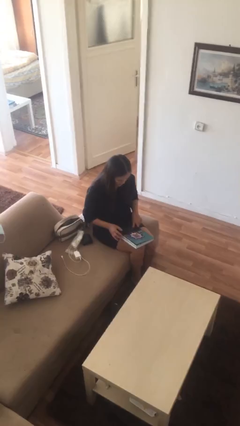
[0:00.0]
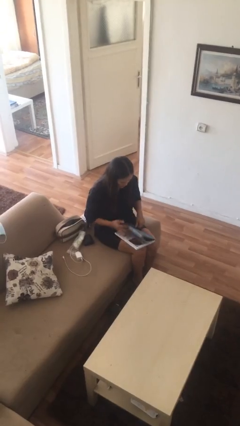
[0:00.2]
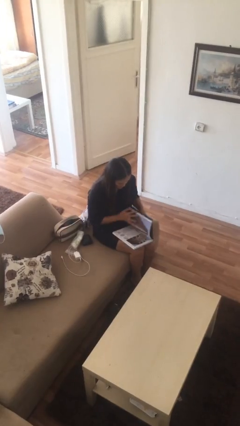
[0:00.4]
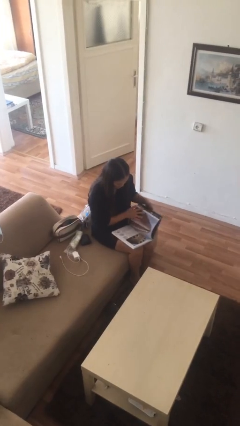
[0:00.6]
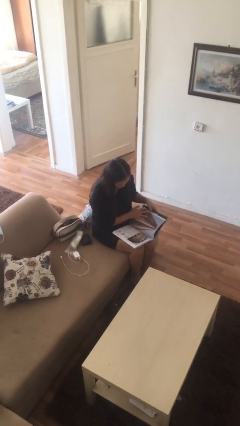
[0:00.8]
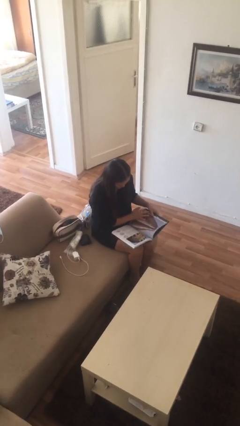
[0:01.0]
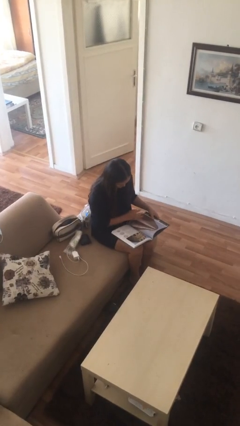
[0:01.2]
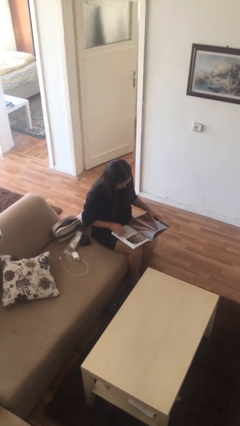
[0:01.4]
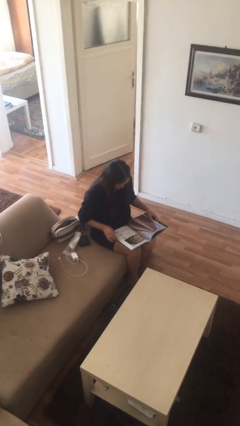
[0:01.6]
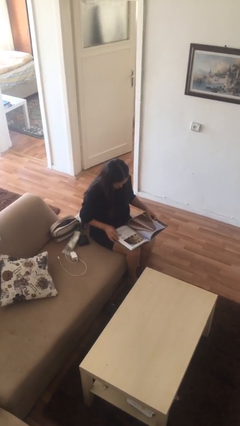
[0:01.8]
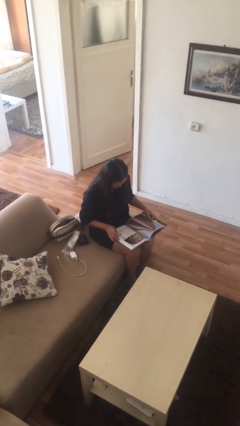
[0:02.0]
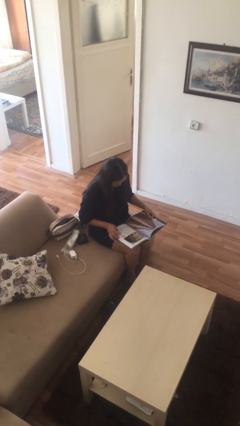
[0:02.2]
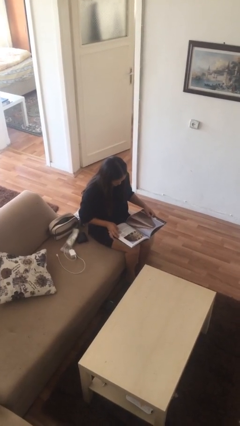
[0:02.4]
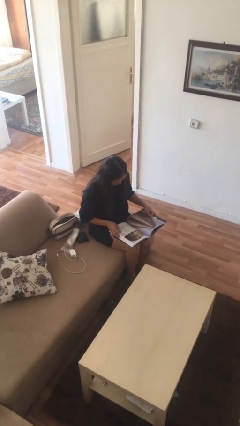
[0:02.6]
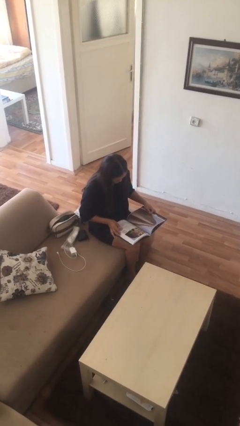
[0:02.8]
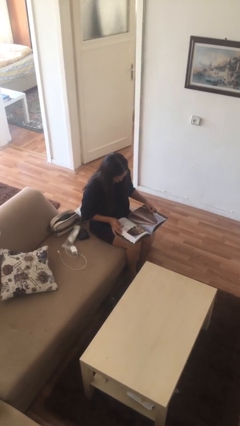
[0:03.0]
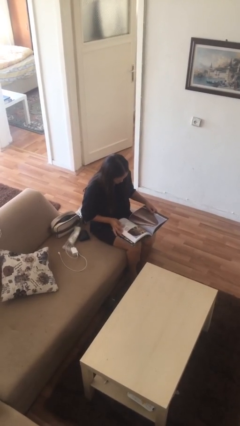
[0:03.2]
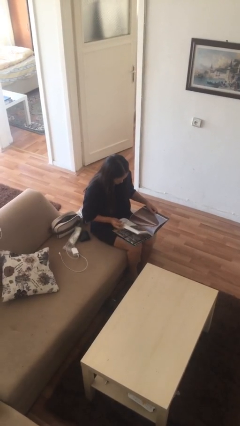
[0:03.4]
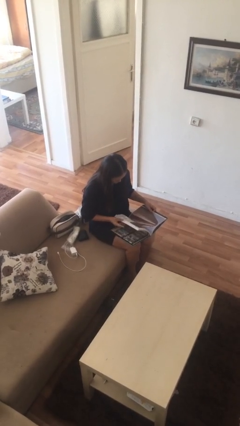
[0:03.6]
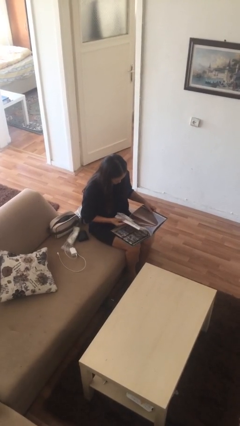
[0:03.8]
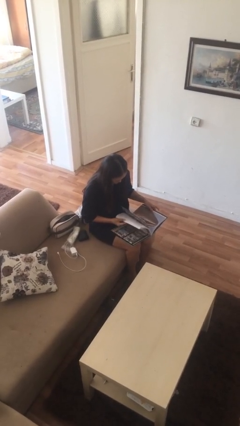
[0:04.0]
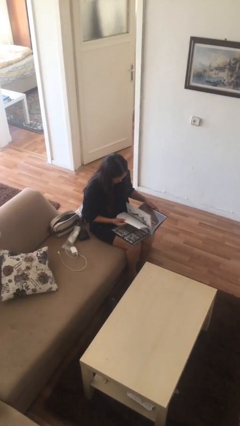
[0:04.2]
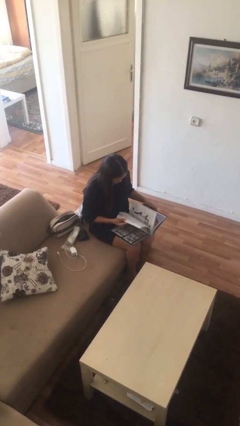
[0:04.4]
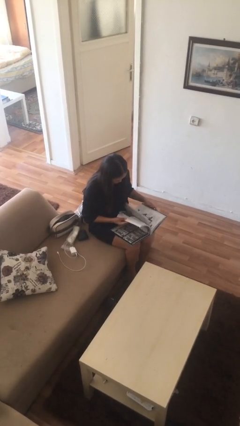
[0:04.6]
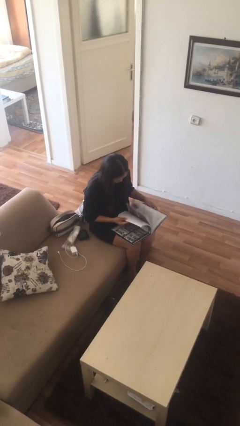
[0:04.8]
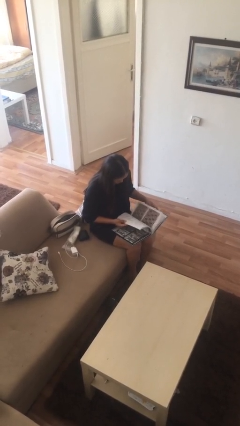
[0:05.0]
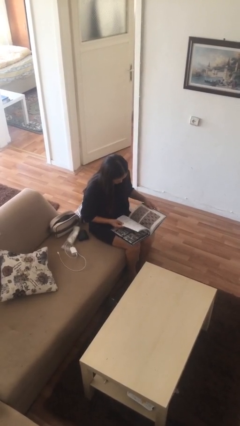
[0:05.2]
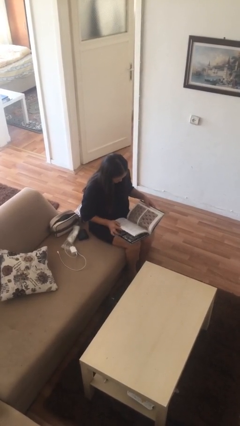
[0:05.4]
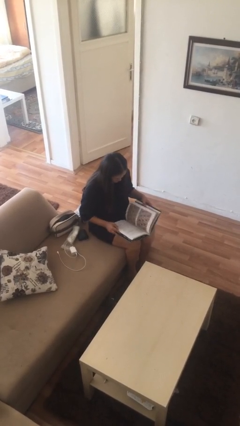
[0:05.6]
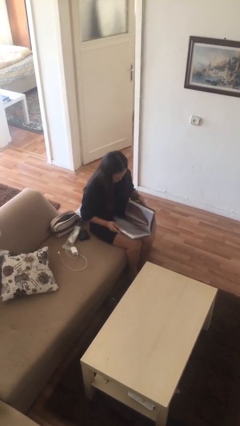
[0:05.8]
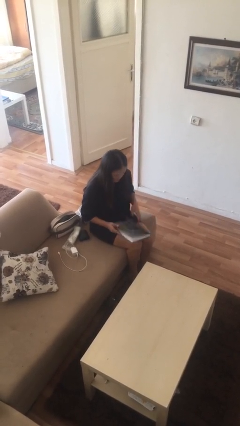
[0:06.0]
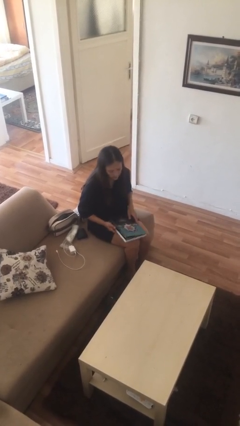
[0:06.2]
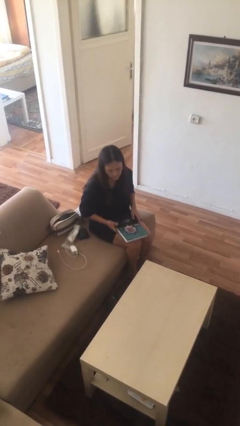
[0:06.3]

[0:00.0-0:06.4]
person reads document

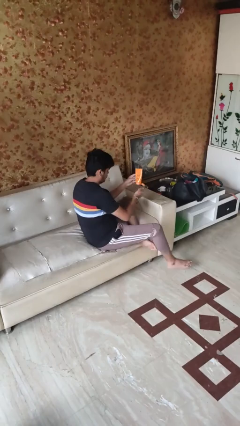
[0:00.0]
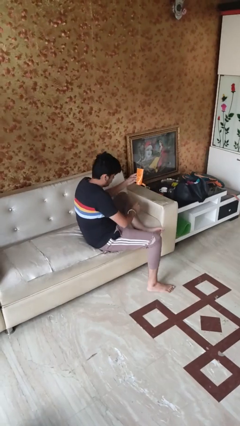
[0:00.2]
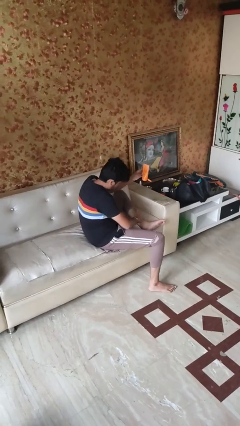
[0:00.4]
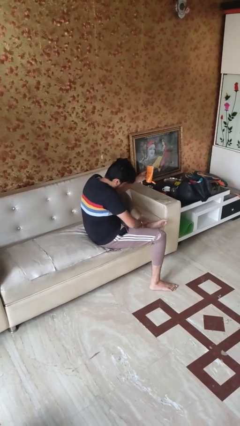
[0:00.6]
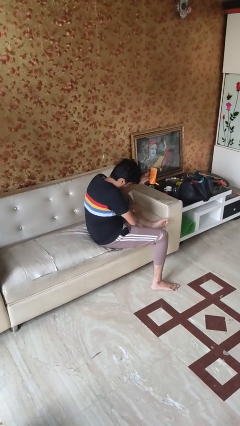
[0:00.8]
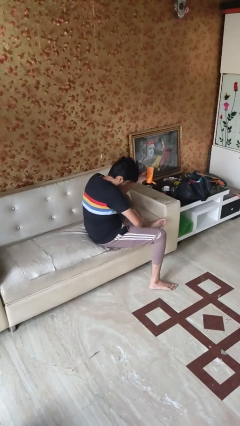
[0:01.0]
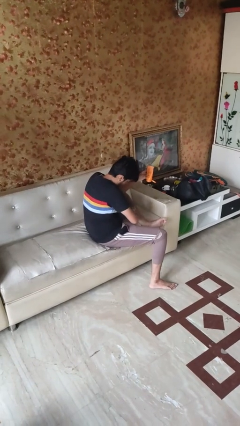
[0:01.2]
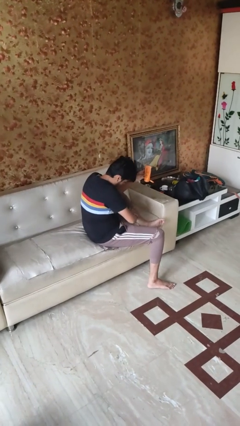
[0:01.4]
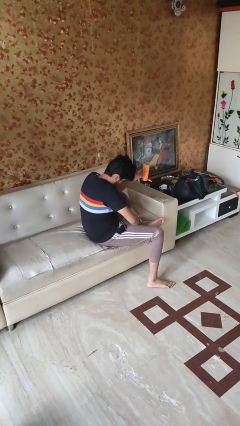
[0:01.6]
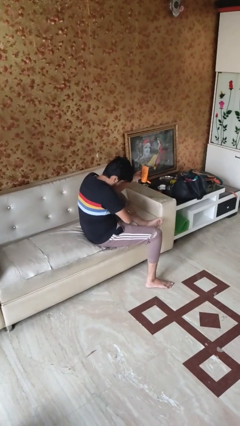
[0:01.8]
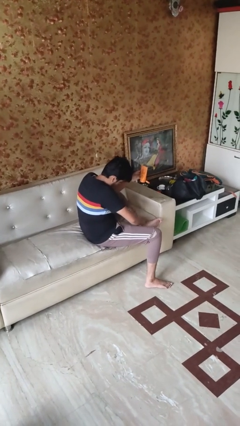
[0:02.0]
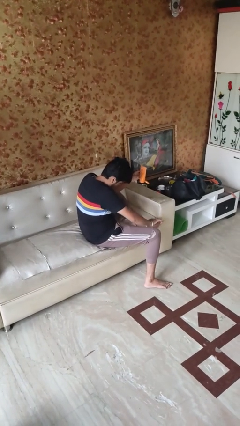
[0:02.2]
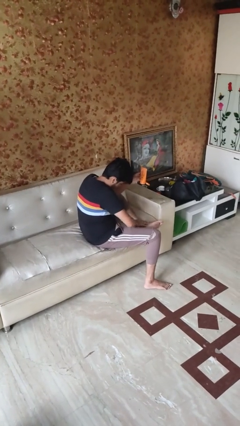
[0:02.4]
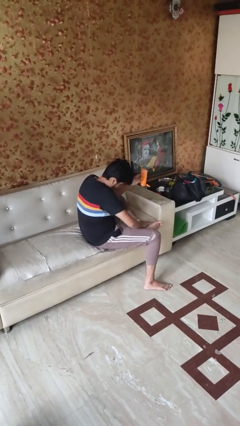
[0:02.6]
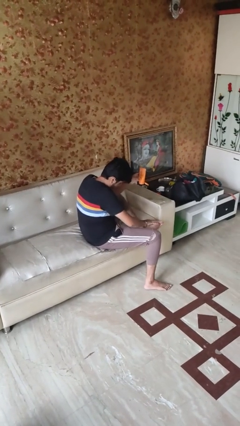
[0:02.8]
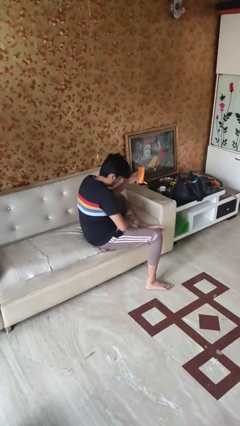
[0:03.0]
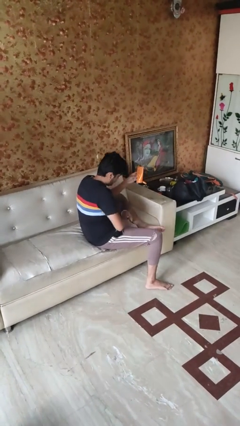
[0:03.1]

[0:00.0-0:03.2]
person applies sunscreen

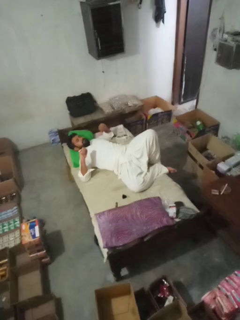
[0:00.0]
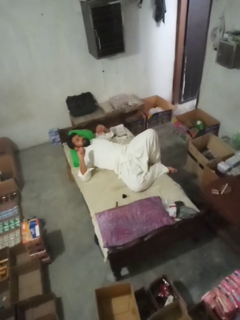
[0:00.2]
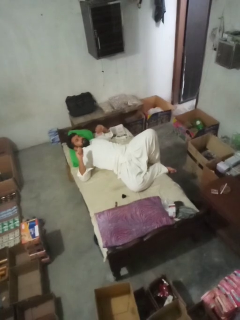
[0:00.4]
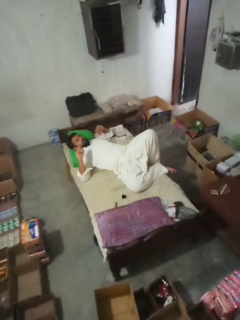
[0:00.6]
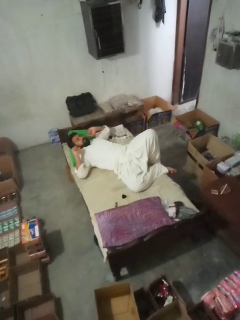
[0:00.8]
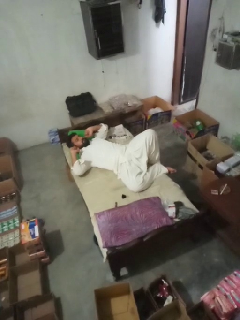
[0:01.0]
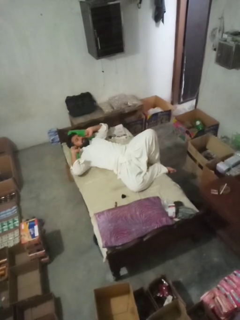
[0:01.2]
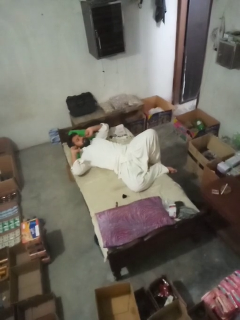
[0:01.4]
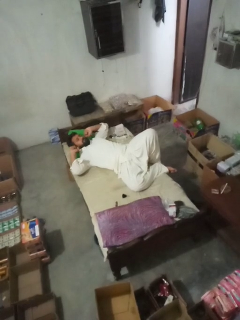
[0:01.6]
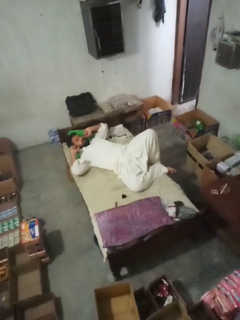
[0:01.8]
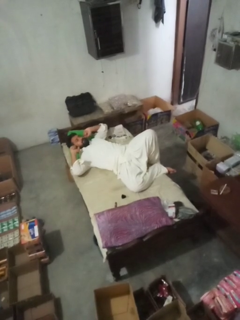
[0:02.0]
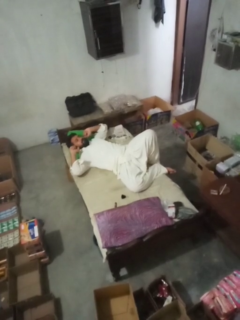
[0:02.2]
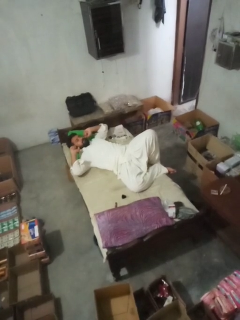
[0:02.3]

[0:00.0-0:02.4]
person puts fingers in ear

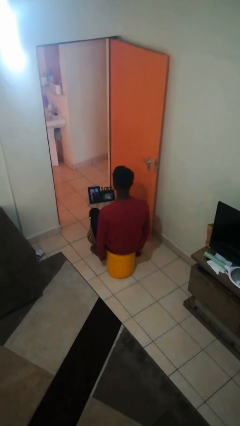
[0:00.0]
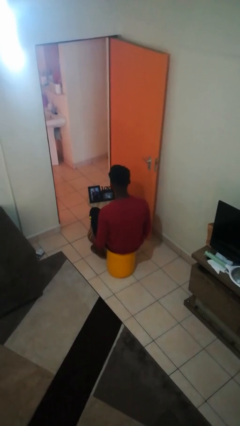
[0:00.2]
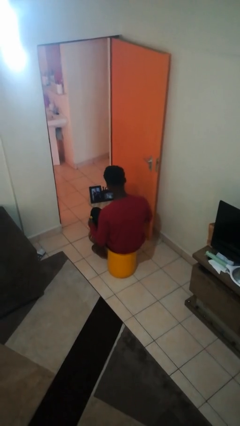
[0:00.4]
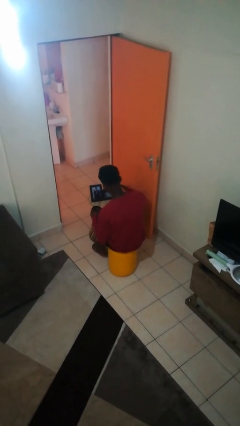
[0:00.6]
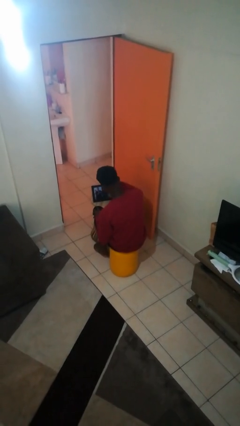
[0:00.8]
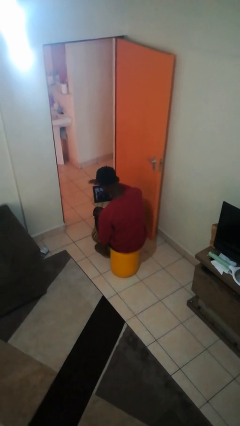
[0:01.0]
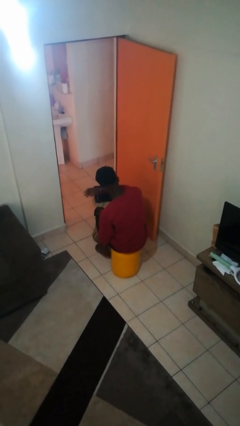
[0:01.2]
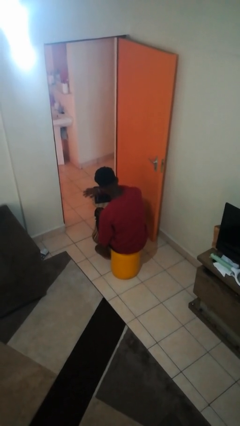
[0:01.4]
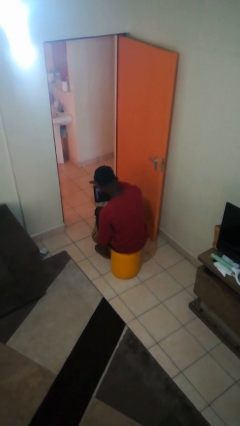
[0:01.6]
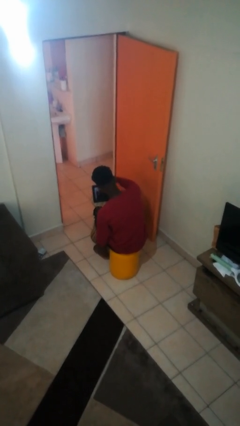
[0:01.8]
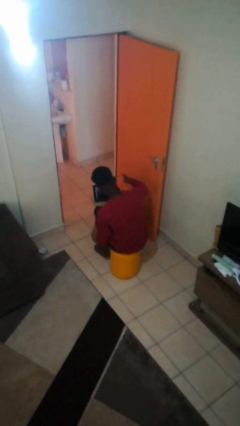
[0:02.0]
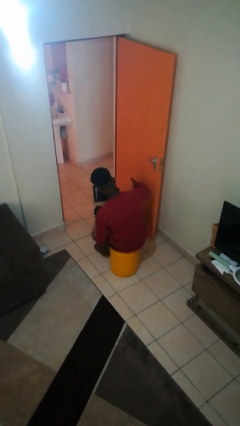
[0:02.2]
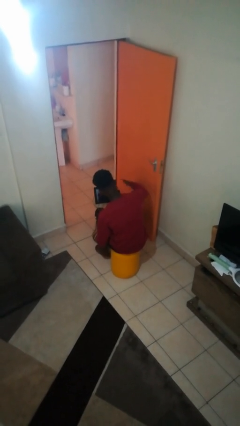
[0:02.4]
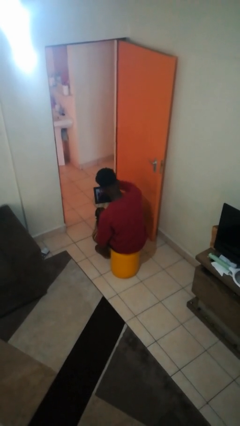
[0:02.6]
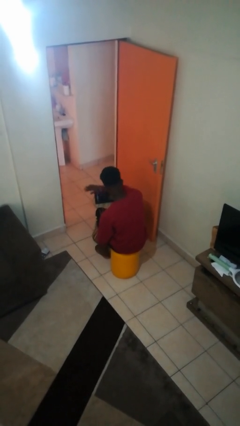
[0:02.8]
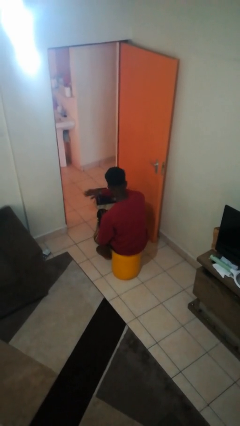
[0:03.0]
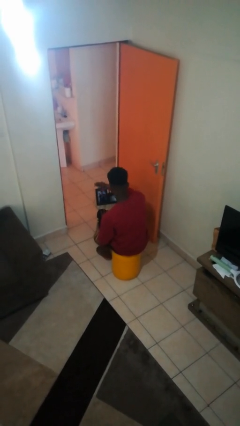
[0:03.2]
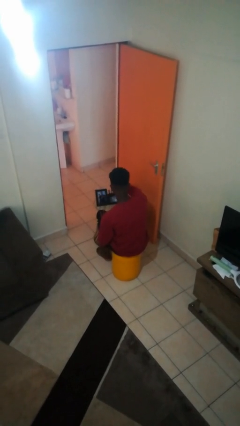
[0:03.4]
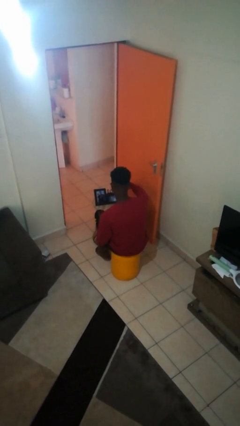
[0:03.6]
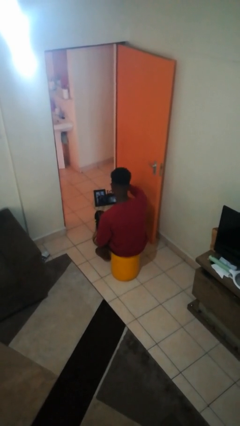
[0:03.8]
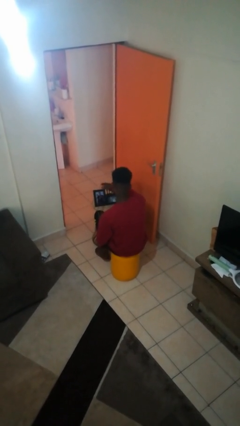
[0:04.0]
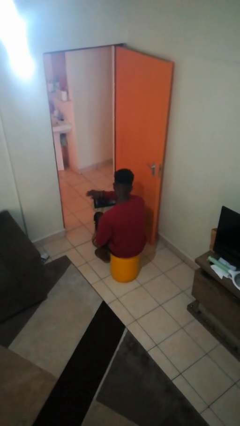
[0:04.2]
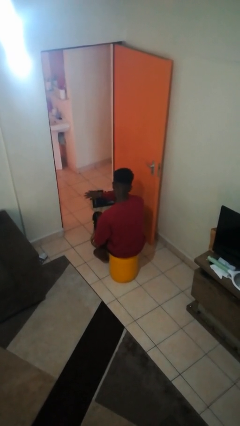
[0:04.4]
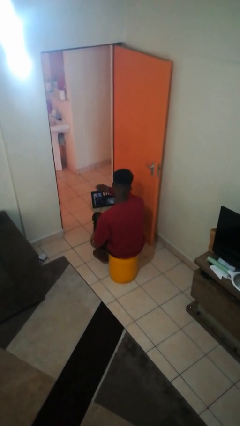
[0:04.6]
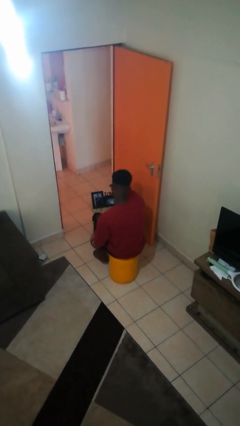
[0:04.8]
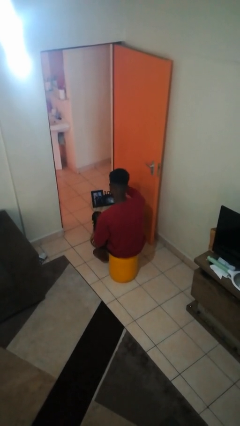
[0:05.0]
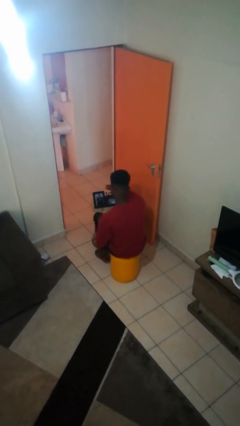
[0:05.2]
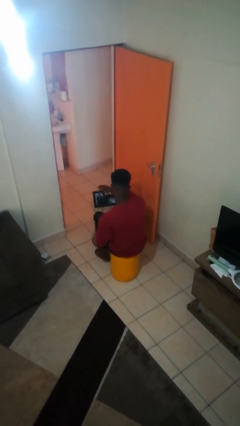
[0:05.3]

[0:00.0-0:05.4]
person waves hand over object

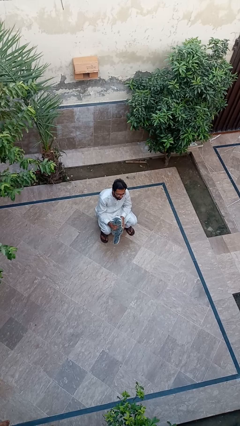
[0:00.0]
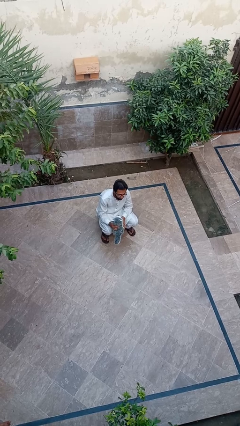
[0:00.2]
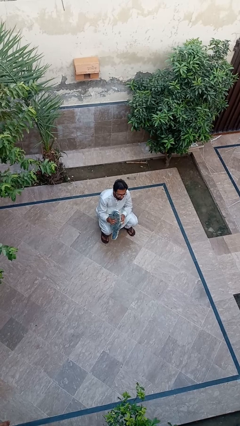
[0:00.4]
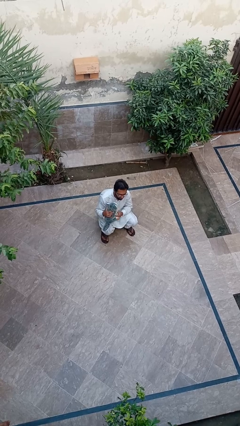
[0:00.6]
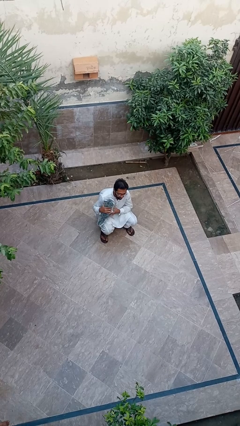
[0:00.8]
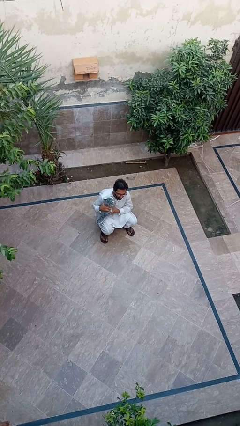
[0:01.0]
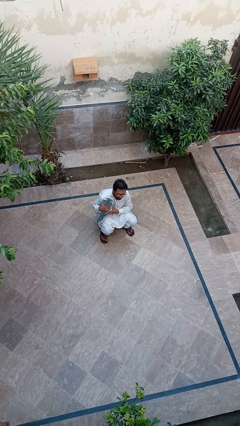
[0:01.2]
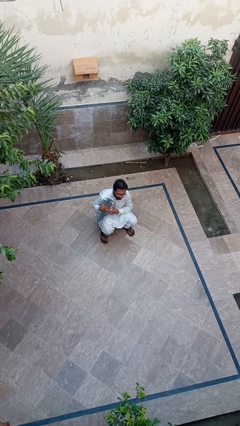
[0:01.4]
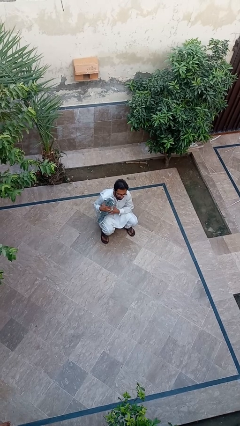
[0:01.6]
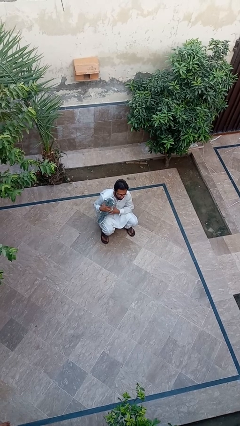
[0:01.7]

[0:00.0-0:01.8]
person hugs dog
